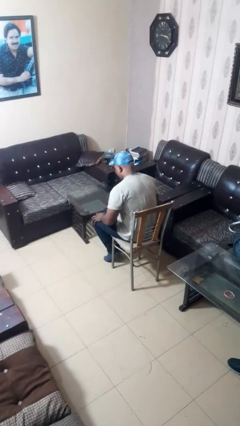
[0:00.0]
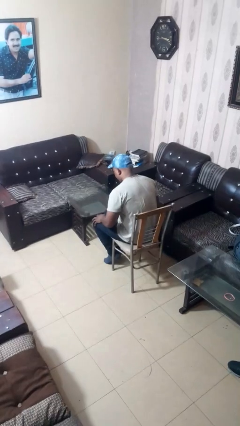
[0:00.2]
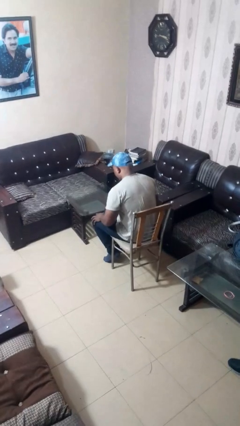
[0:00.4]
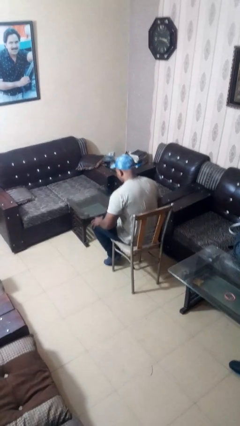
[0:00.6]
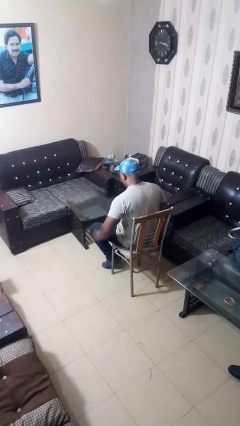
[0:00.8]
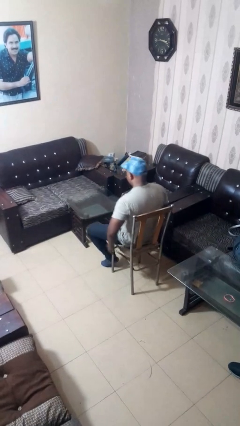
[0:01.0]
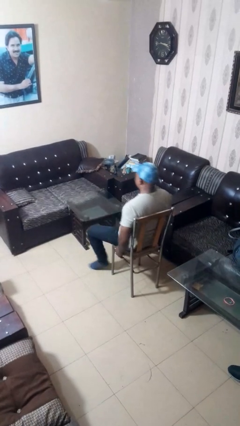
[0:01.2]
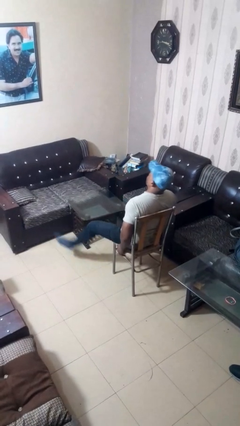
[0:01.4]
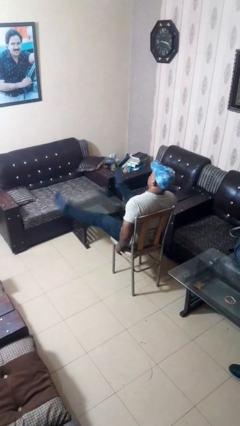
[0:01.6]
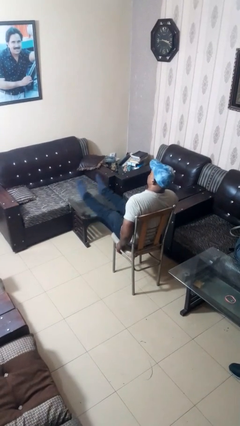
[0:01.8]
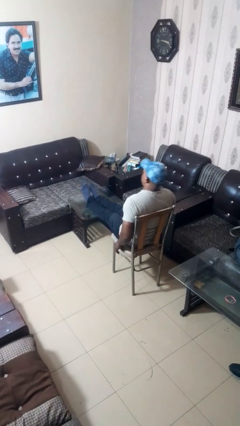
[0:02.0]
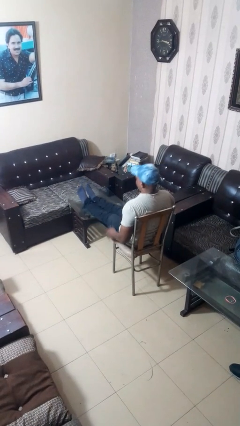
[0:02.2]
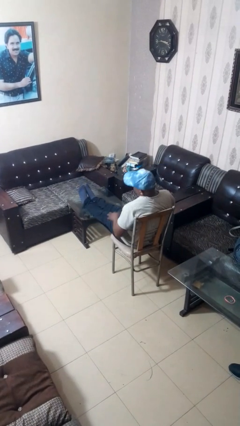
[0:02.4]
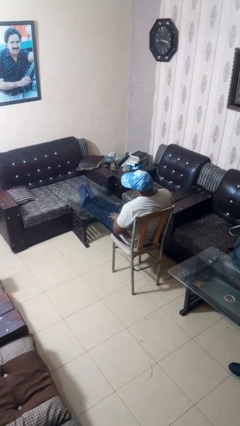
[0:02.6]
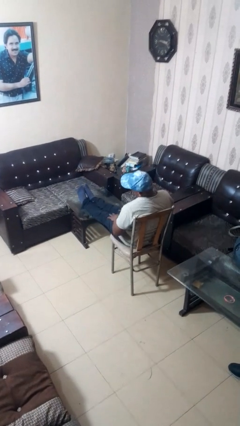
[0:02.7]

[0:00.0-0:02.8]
person puts feet up

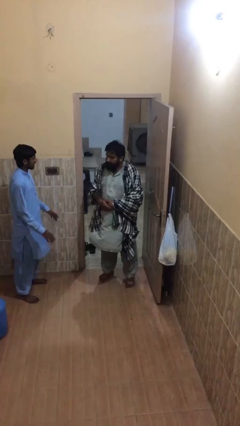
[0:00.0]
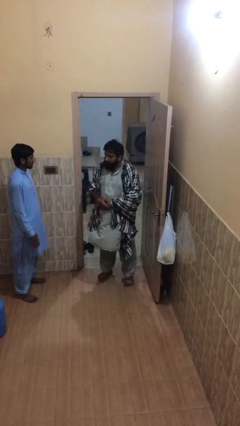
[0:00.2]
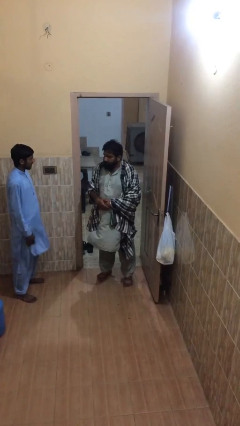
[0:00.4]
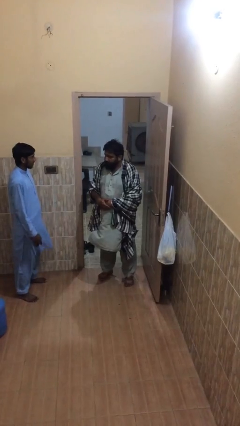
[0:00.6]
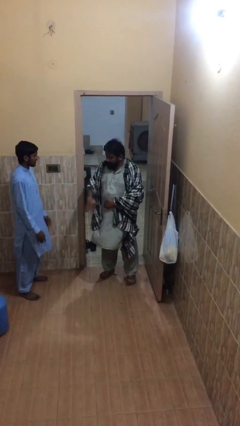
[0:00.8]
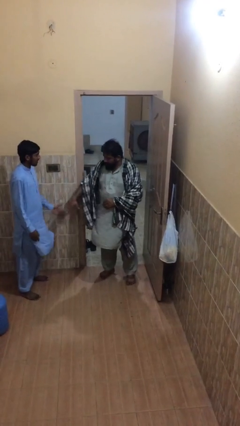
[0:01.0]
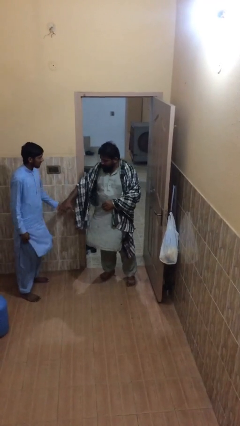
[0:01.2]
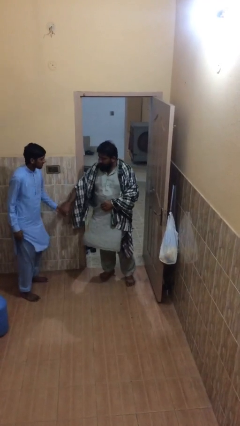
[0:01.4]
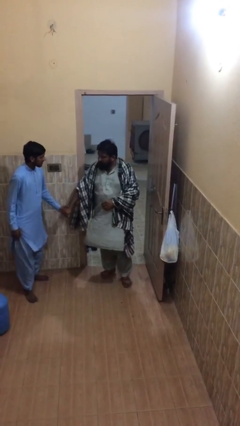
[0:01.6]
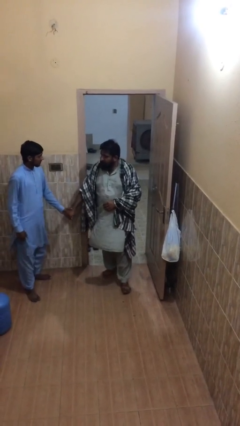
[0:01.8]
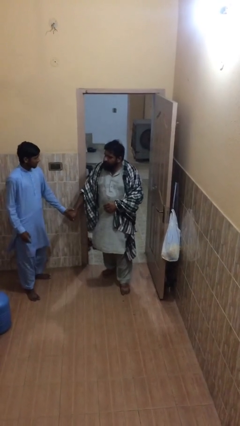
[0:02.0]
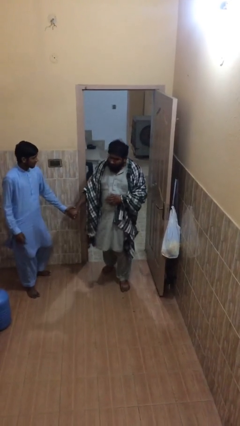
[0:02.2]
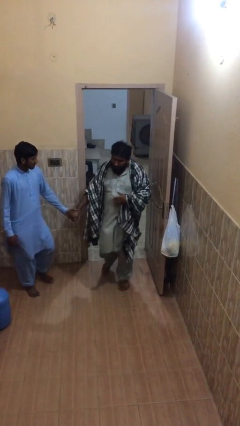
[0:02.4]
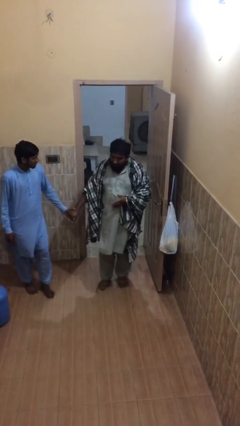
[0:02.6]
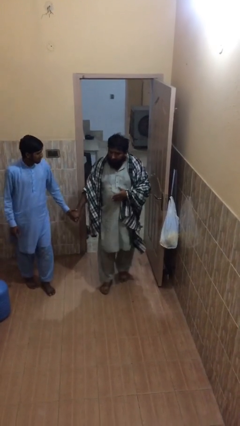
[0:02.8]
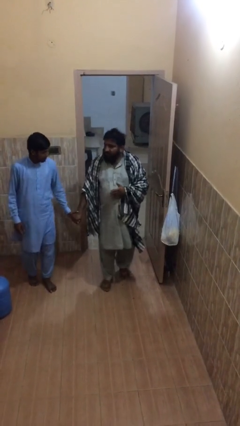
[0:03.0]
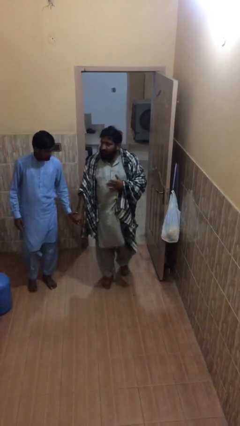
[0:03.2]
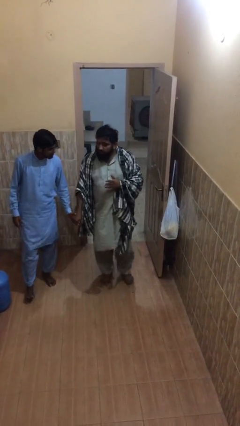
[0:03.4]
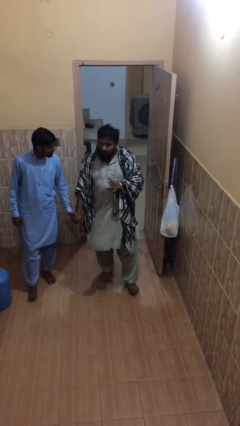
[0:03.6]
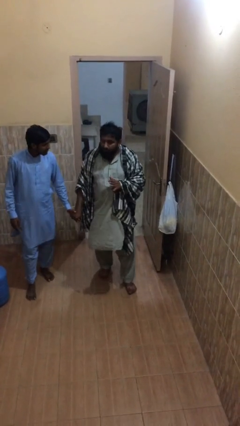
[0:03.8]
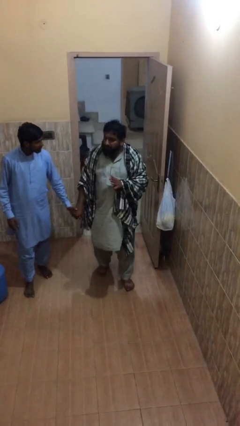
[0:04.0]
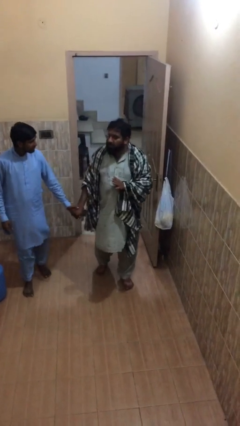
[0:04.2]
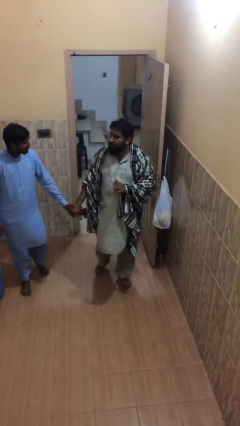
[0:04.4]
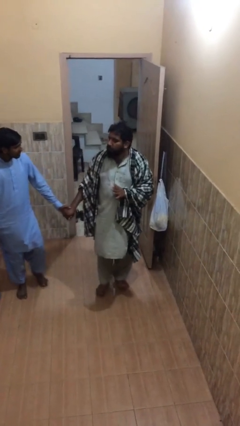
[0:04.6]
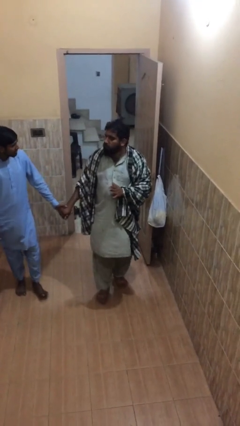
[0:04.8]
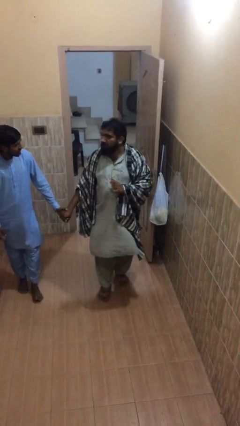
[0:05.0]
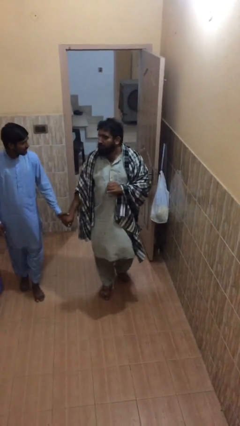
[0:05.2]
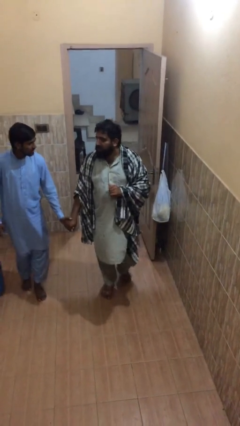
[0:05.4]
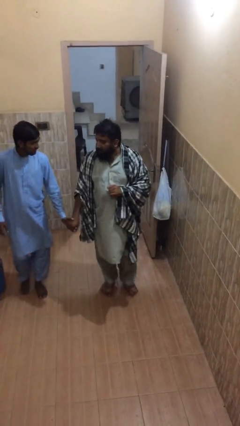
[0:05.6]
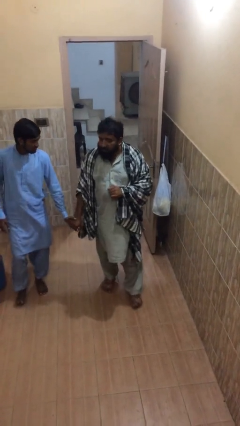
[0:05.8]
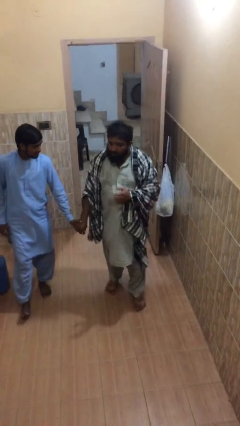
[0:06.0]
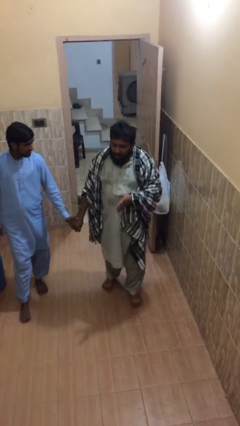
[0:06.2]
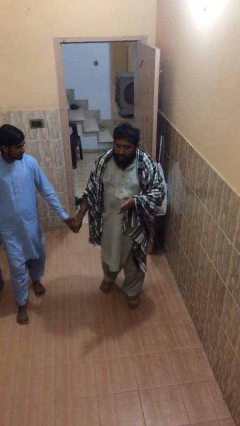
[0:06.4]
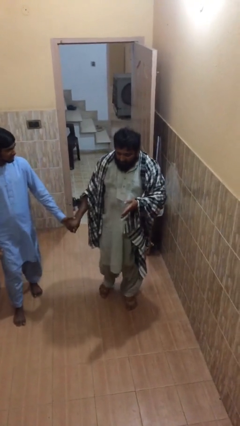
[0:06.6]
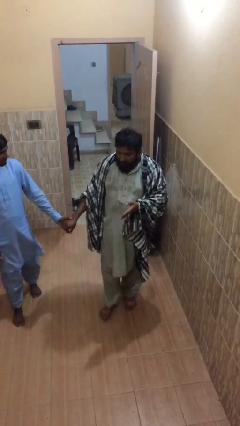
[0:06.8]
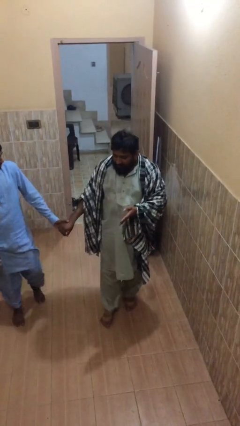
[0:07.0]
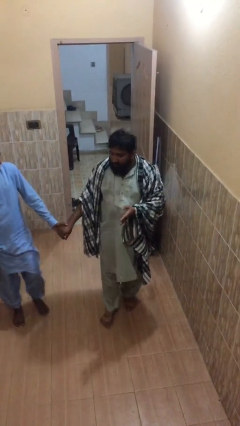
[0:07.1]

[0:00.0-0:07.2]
person holds hand

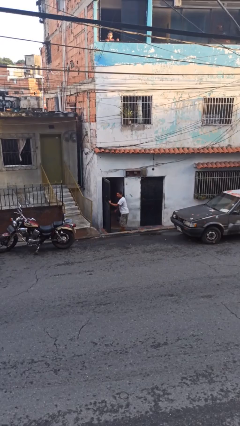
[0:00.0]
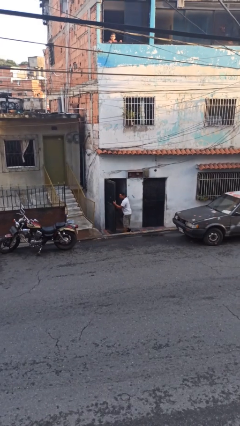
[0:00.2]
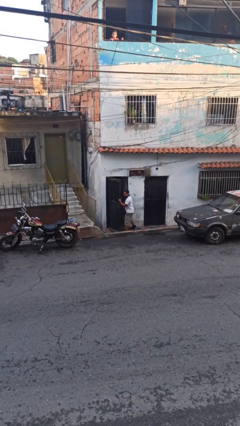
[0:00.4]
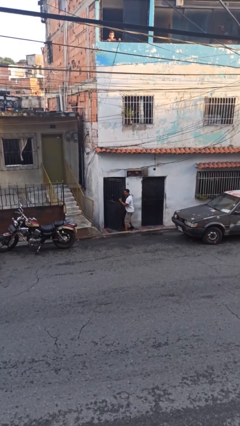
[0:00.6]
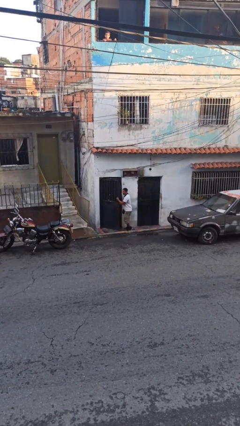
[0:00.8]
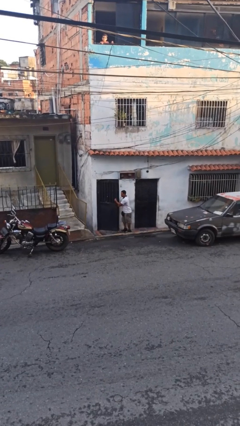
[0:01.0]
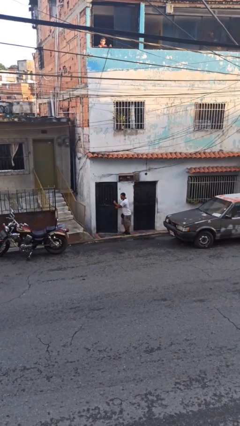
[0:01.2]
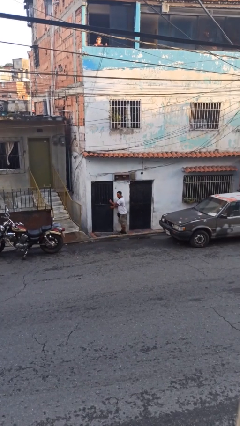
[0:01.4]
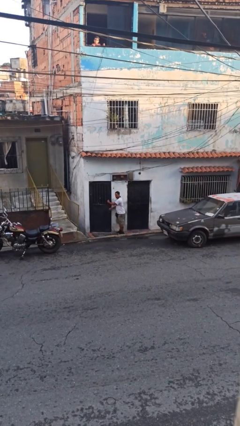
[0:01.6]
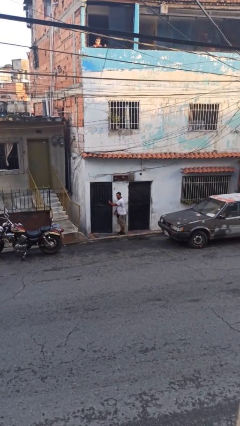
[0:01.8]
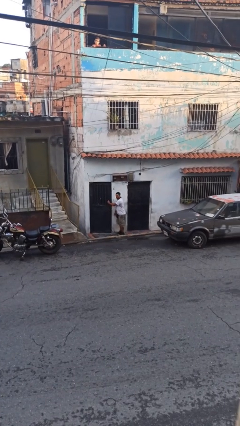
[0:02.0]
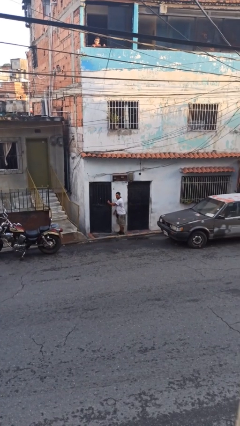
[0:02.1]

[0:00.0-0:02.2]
person closes facility door

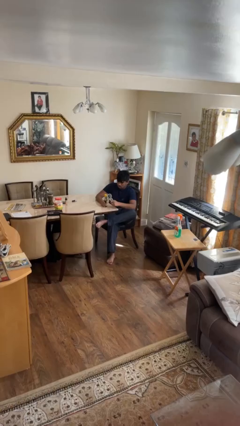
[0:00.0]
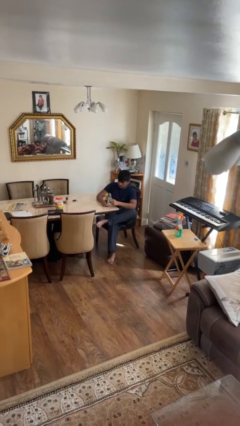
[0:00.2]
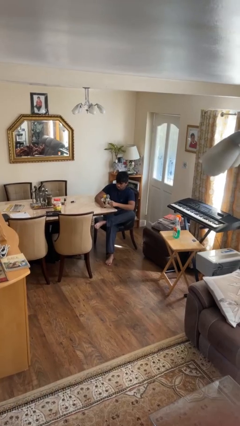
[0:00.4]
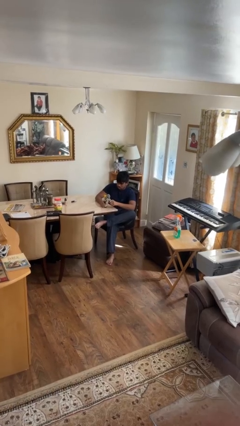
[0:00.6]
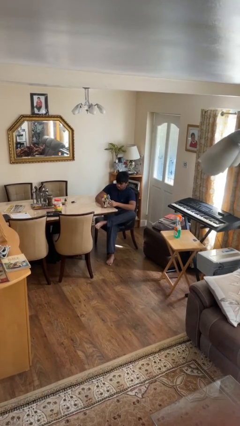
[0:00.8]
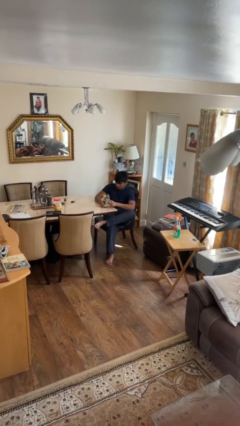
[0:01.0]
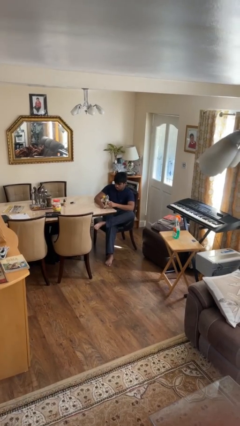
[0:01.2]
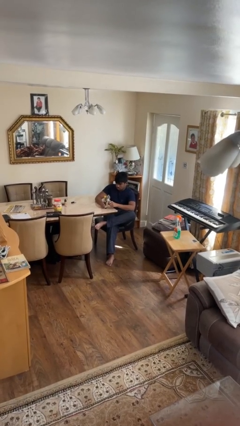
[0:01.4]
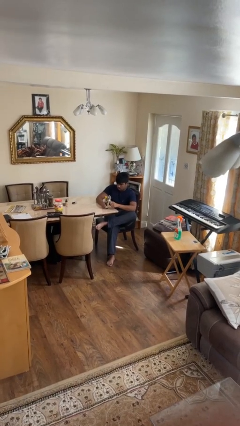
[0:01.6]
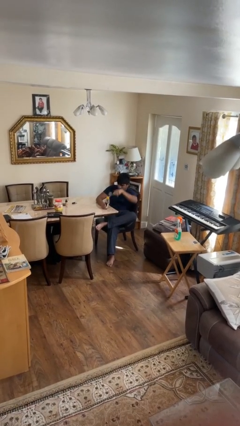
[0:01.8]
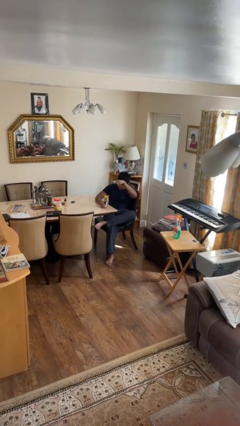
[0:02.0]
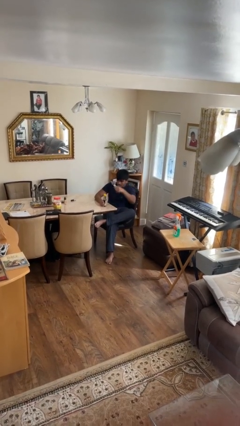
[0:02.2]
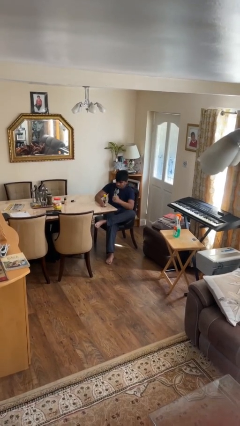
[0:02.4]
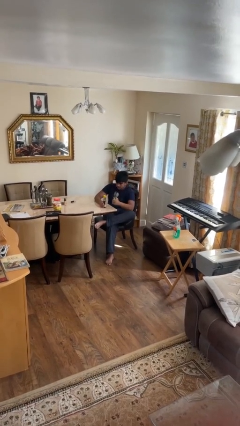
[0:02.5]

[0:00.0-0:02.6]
person opens can with can opener

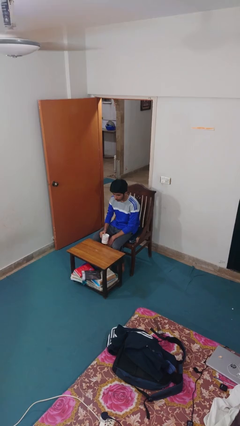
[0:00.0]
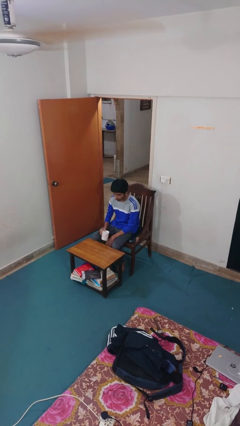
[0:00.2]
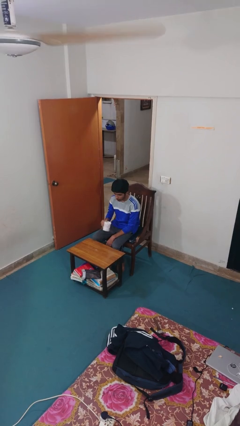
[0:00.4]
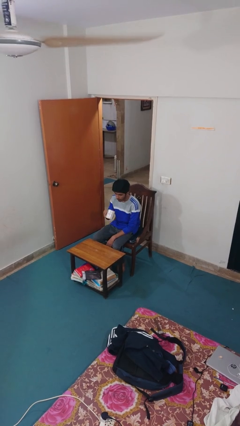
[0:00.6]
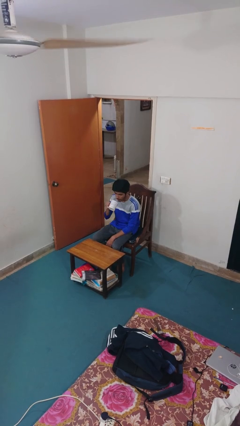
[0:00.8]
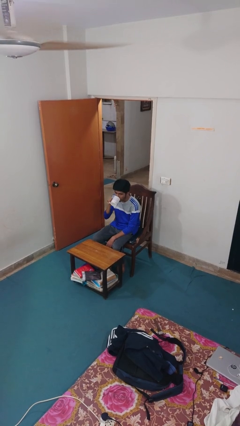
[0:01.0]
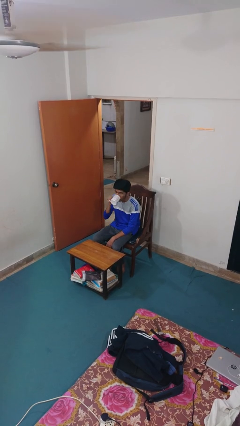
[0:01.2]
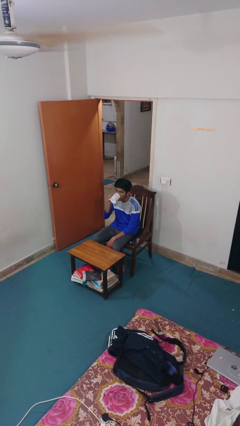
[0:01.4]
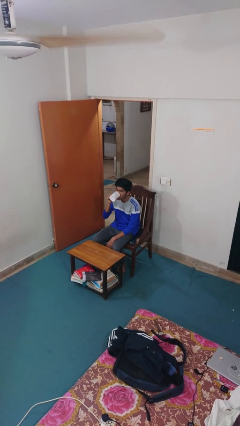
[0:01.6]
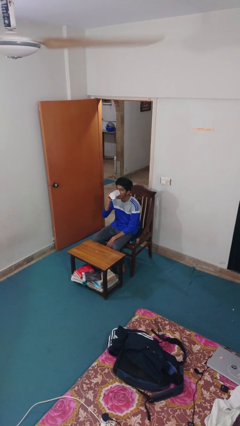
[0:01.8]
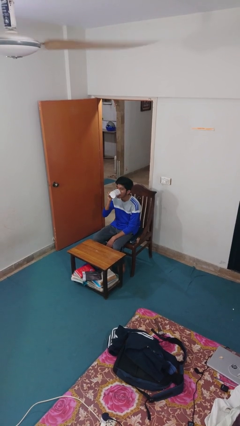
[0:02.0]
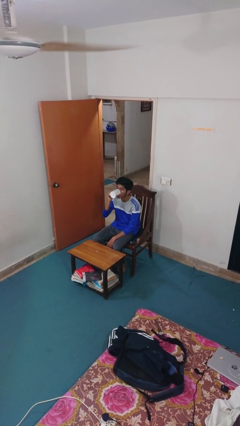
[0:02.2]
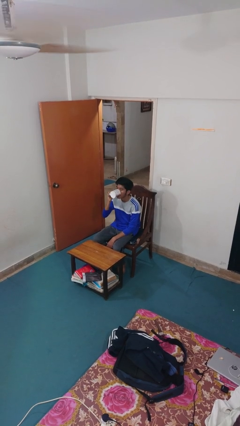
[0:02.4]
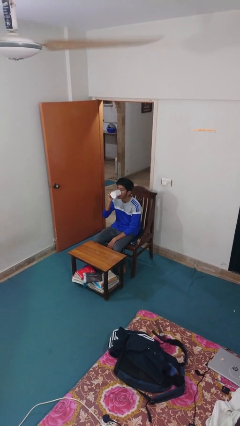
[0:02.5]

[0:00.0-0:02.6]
person drinks from mug

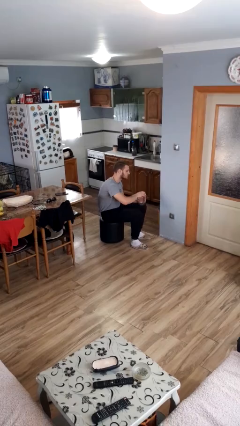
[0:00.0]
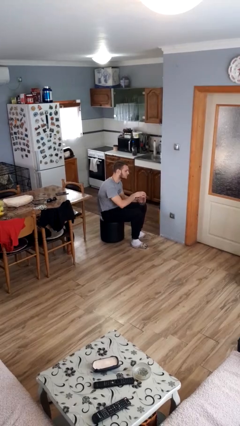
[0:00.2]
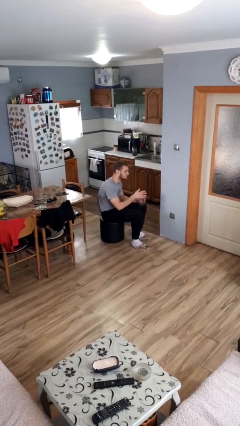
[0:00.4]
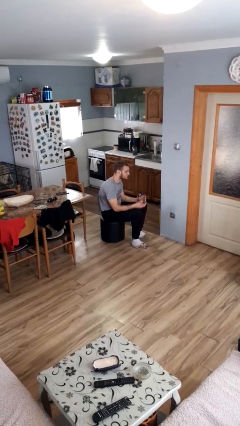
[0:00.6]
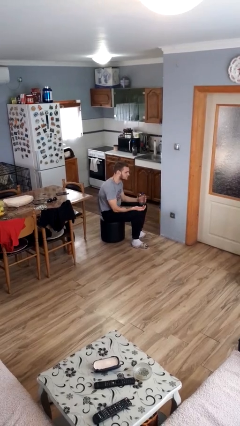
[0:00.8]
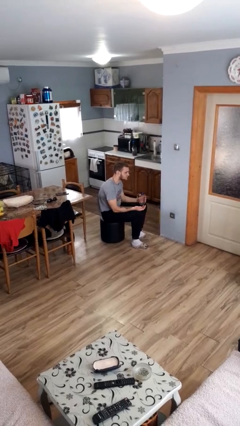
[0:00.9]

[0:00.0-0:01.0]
person closes jar
